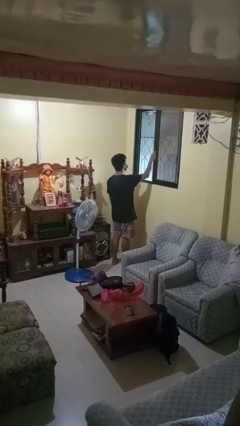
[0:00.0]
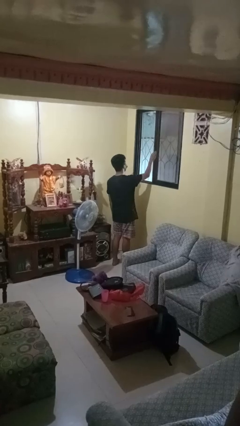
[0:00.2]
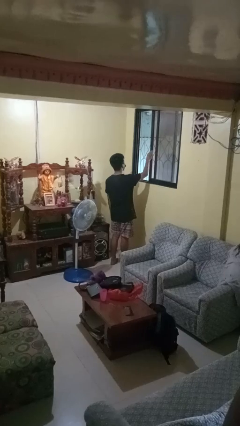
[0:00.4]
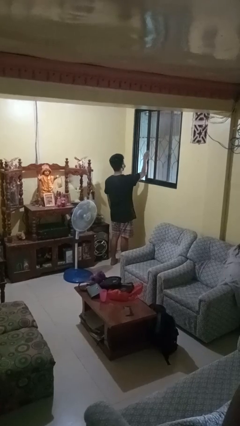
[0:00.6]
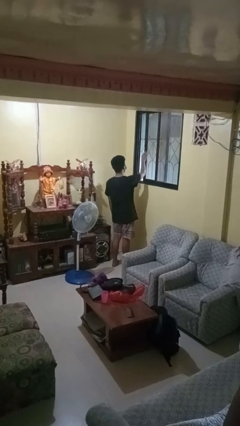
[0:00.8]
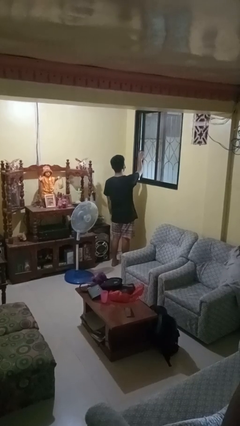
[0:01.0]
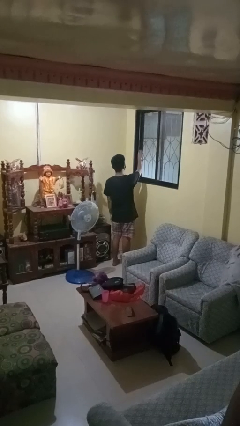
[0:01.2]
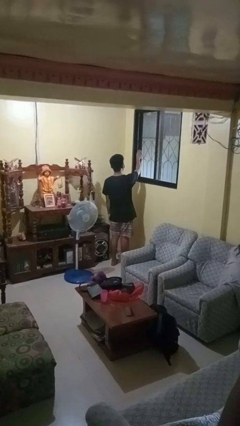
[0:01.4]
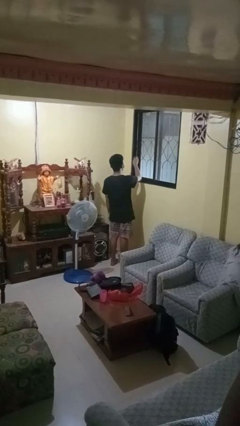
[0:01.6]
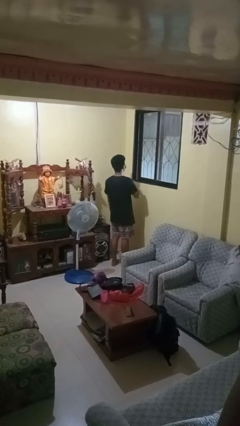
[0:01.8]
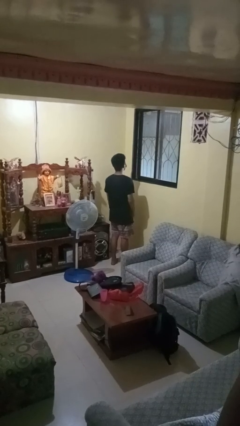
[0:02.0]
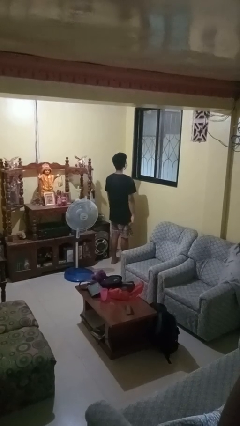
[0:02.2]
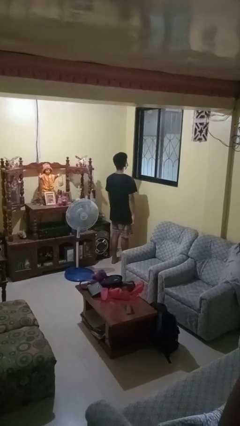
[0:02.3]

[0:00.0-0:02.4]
person closes home window

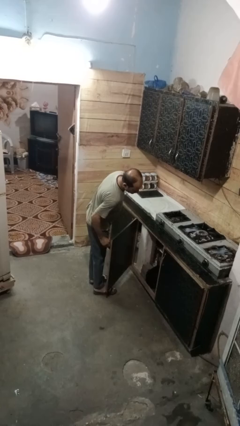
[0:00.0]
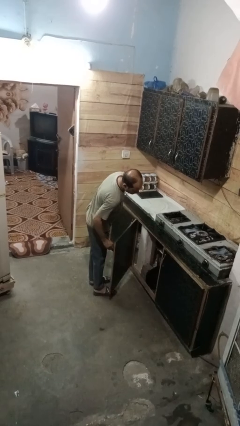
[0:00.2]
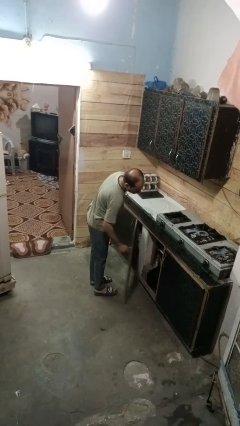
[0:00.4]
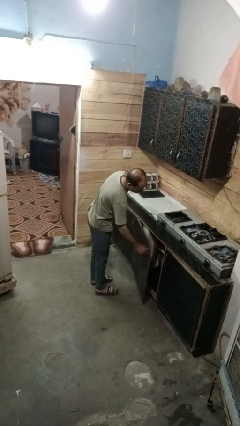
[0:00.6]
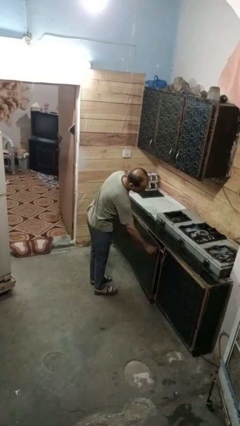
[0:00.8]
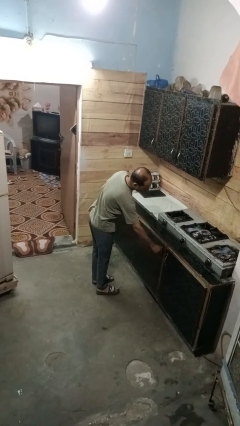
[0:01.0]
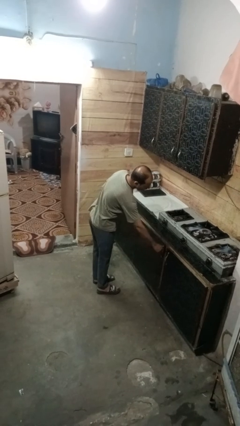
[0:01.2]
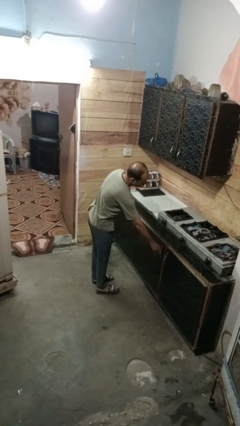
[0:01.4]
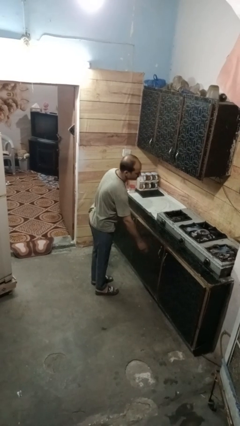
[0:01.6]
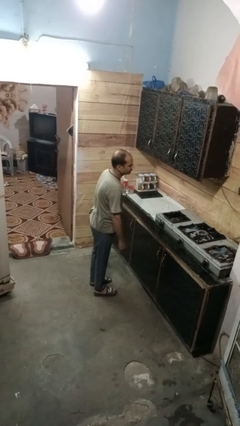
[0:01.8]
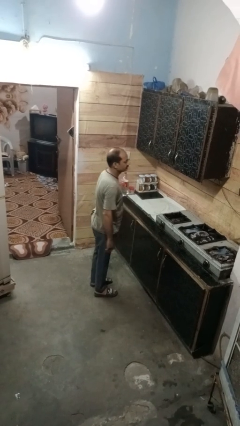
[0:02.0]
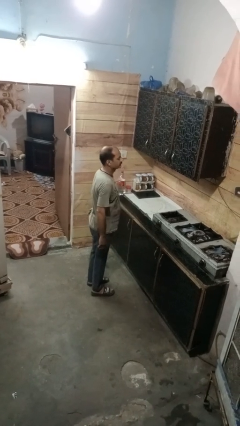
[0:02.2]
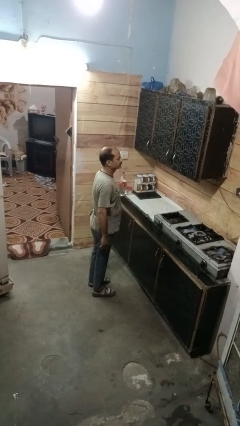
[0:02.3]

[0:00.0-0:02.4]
person closes cabinet

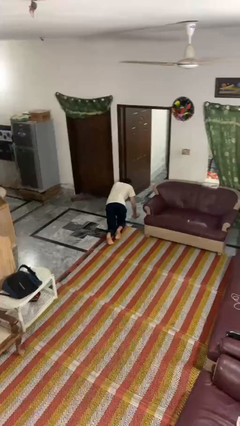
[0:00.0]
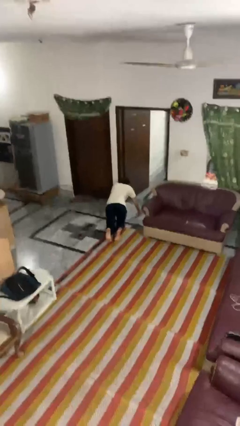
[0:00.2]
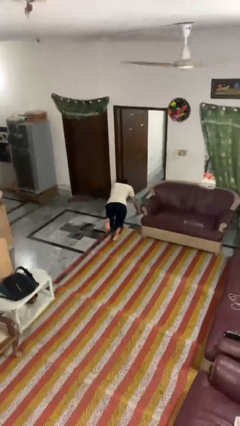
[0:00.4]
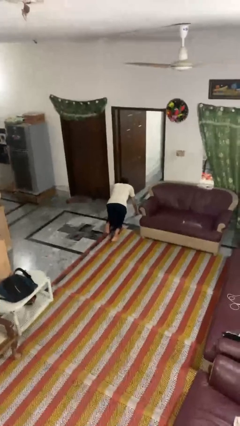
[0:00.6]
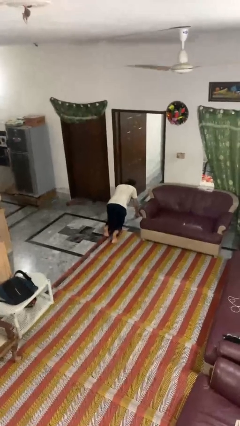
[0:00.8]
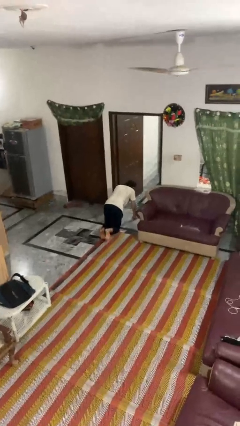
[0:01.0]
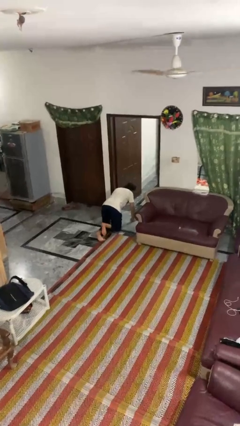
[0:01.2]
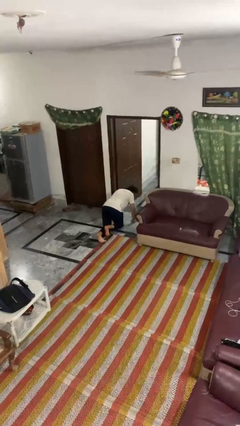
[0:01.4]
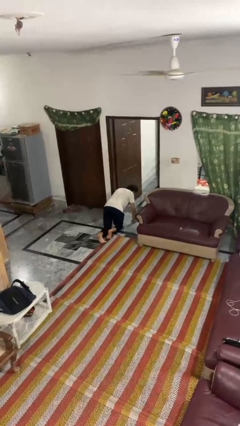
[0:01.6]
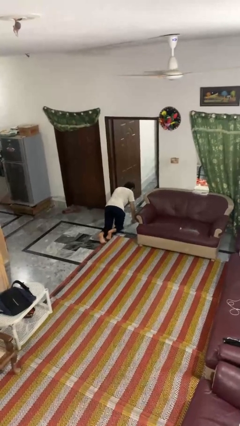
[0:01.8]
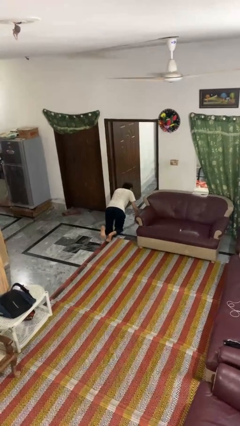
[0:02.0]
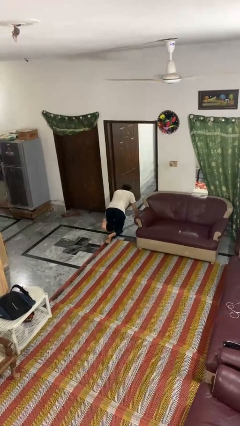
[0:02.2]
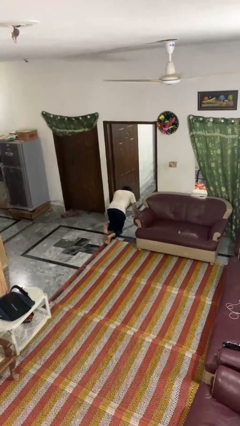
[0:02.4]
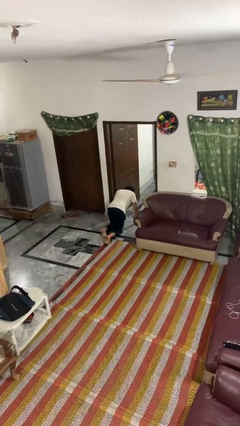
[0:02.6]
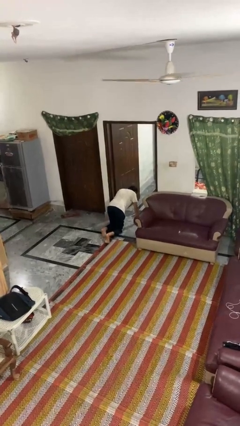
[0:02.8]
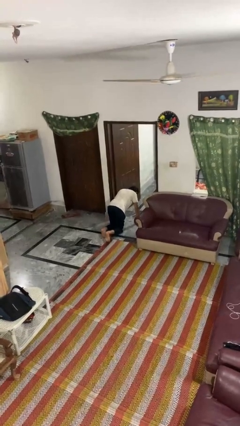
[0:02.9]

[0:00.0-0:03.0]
person crawls

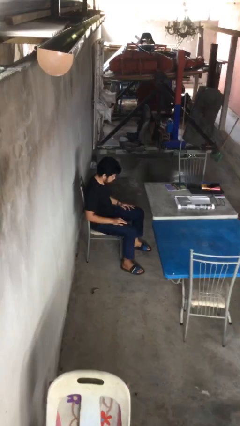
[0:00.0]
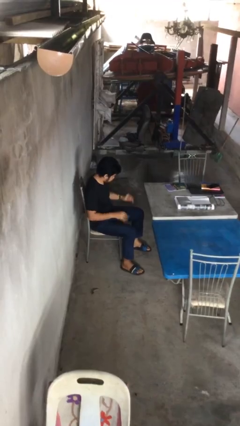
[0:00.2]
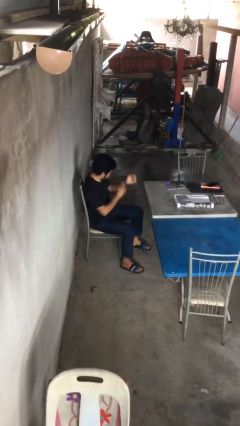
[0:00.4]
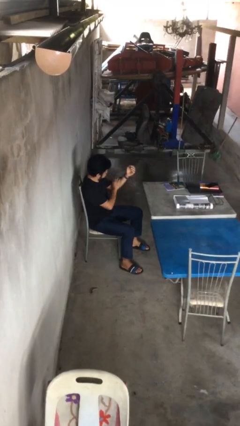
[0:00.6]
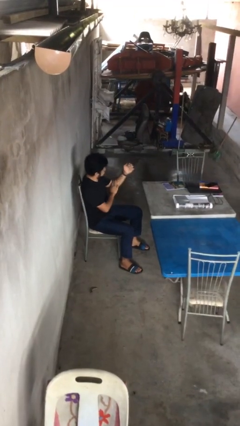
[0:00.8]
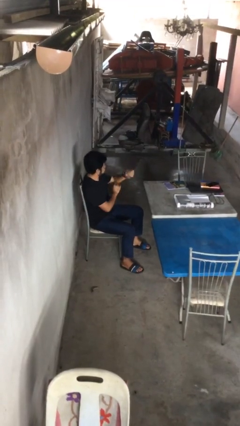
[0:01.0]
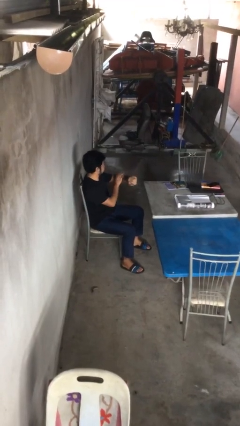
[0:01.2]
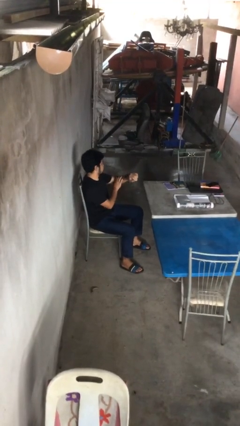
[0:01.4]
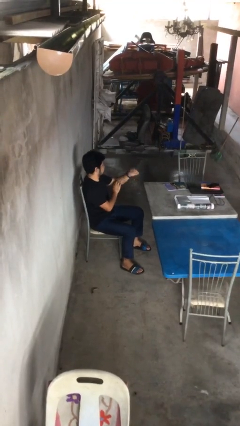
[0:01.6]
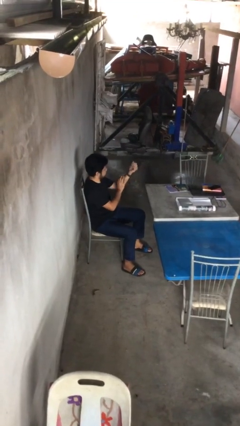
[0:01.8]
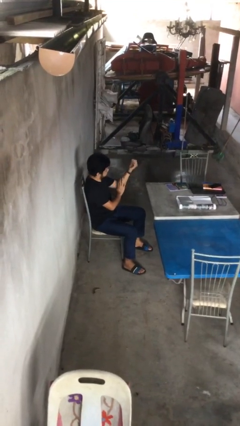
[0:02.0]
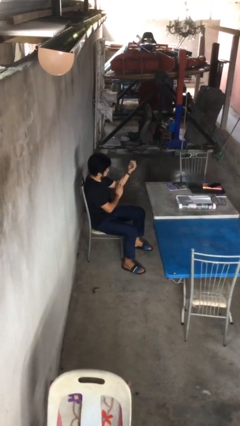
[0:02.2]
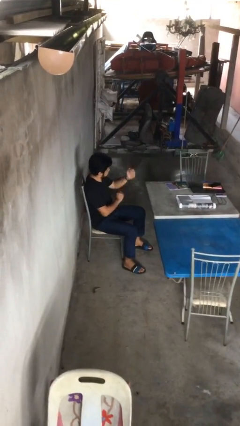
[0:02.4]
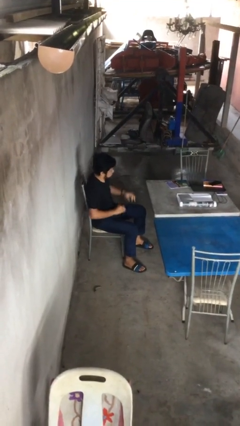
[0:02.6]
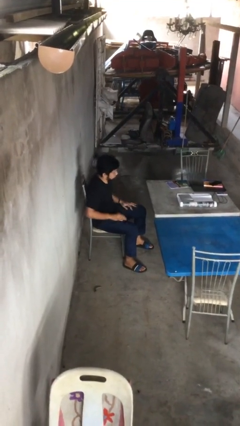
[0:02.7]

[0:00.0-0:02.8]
person looks at hands in lap

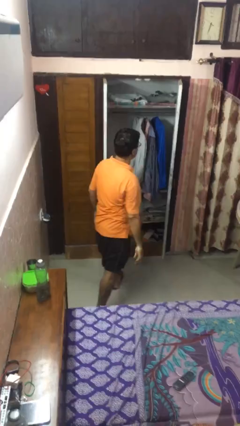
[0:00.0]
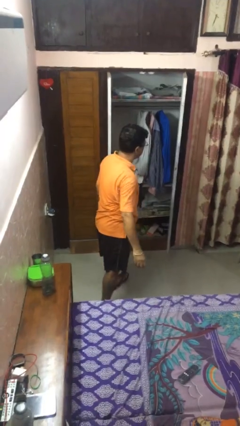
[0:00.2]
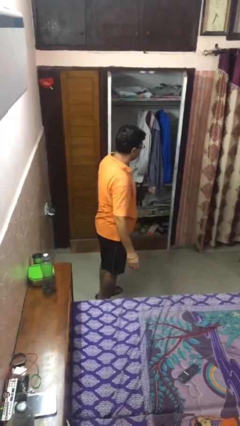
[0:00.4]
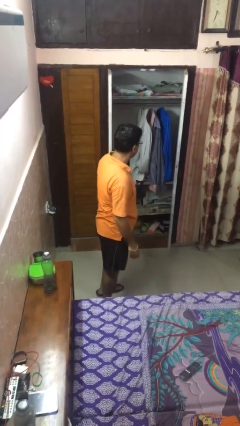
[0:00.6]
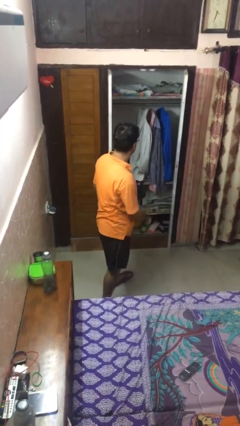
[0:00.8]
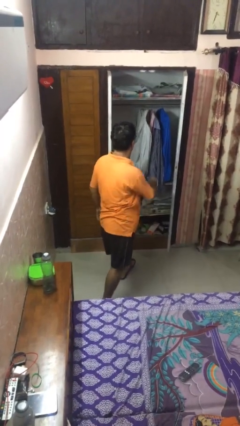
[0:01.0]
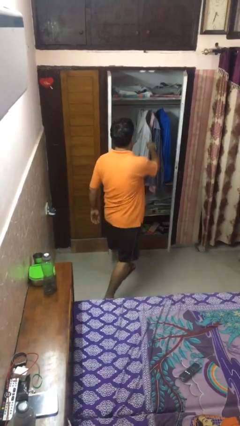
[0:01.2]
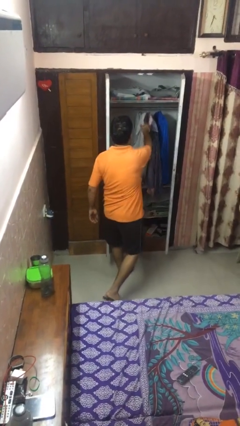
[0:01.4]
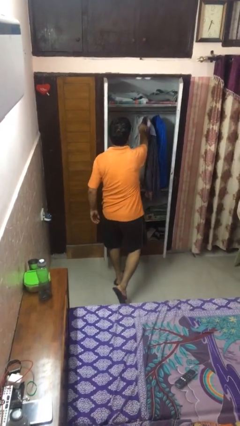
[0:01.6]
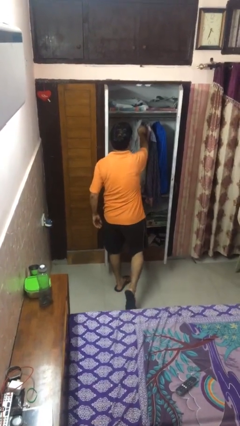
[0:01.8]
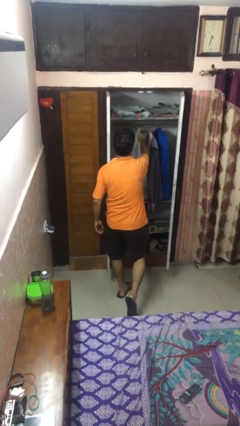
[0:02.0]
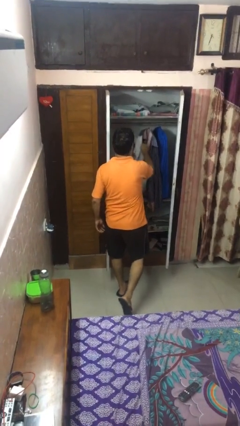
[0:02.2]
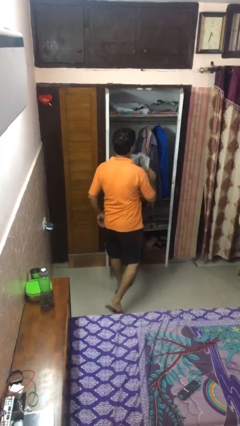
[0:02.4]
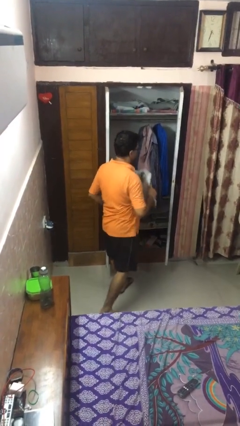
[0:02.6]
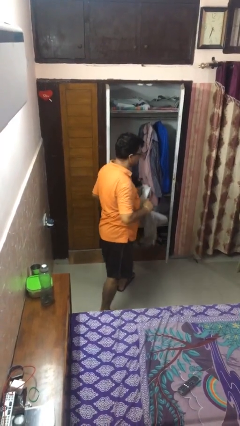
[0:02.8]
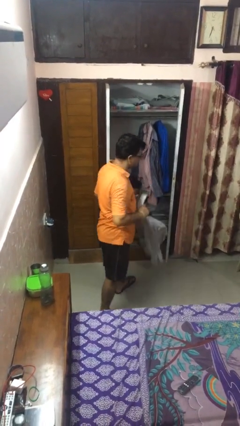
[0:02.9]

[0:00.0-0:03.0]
person takes clothes from closet

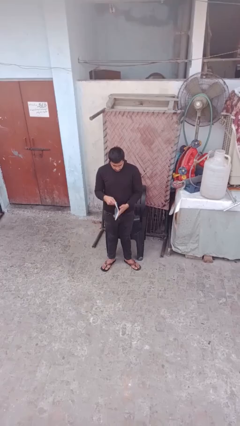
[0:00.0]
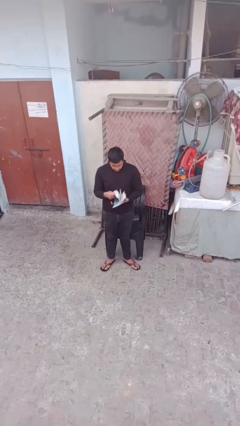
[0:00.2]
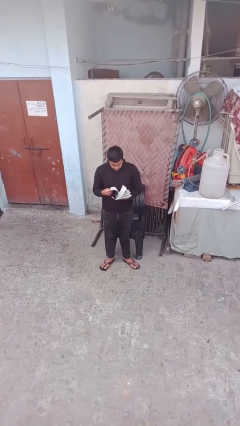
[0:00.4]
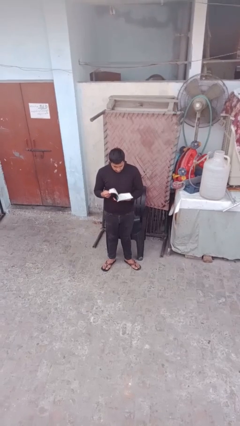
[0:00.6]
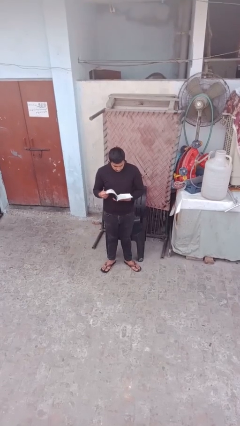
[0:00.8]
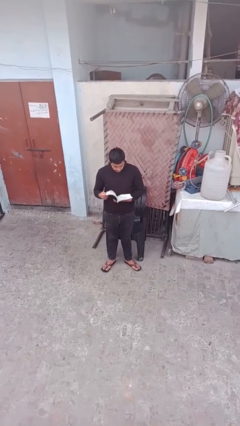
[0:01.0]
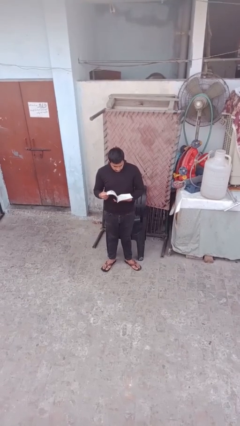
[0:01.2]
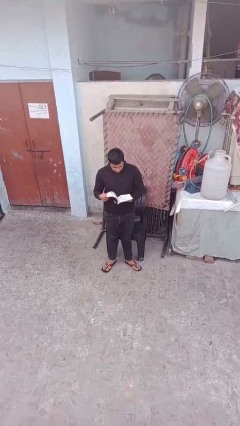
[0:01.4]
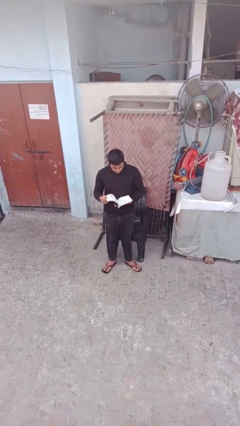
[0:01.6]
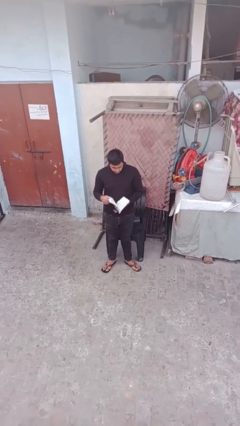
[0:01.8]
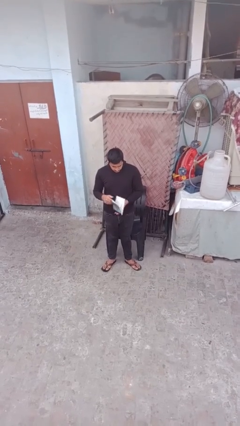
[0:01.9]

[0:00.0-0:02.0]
person reads document

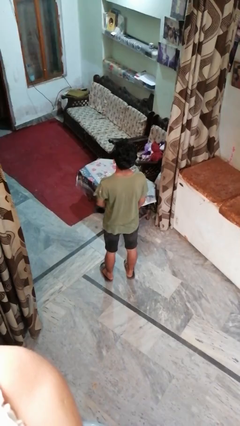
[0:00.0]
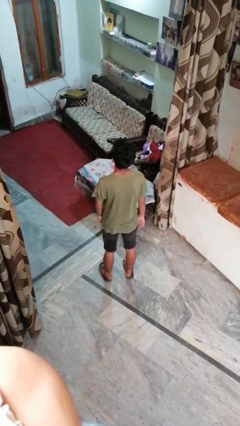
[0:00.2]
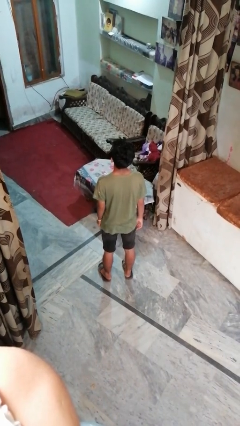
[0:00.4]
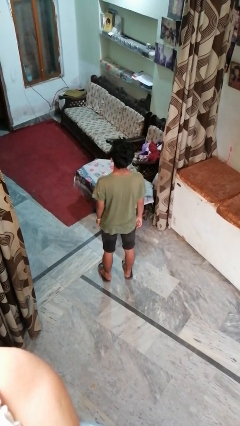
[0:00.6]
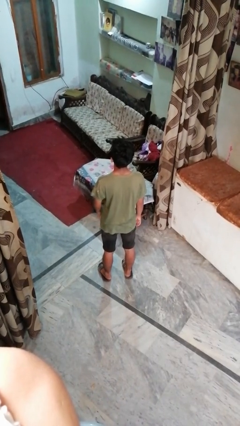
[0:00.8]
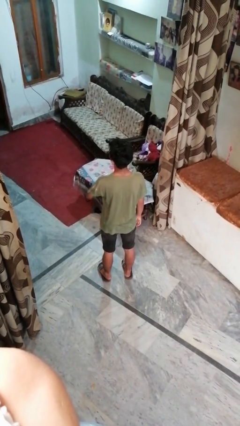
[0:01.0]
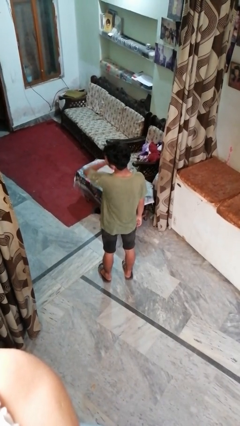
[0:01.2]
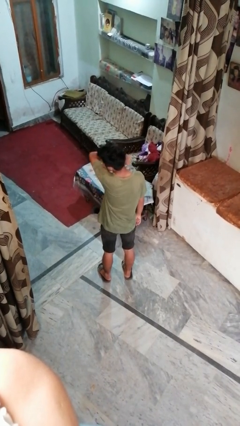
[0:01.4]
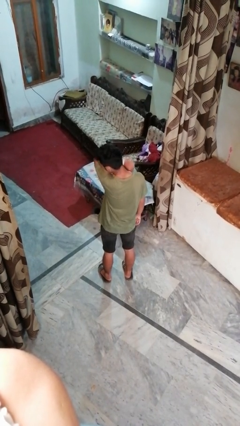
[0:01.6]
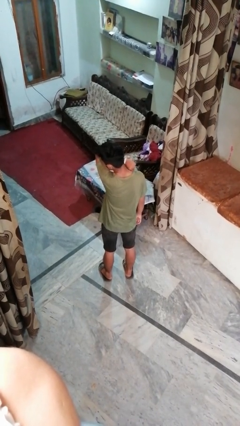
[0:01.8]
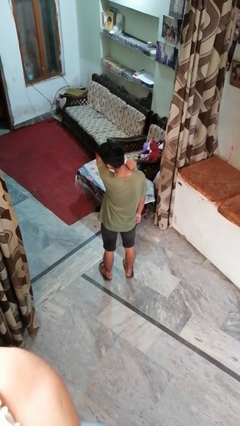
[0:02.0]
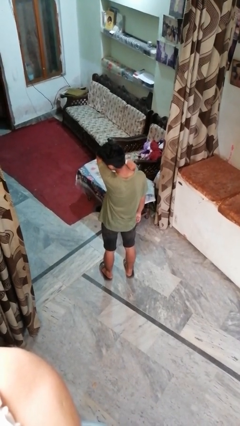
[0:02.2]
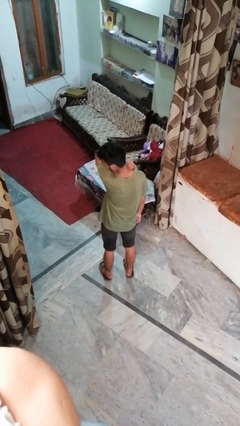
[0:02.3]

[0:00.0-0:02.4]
person sneezes into arm
